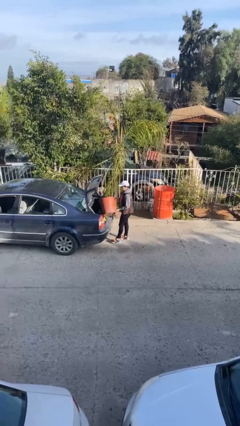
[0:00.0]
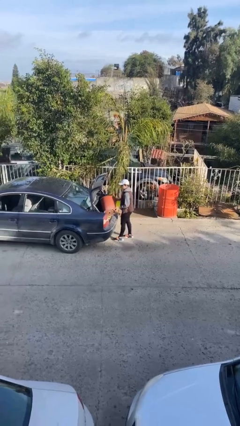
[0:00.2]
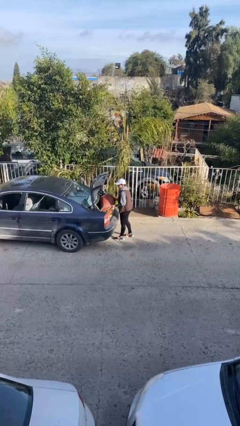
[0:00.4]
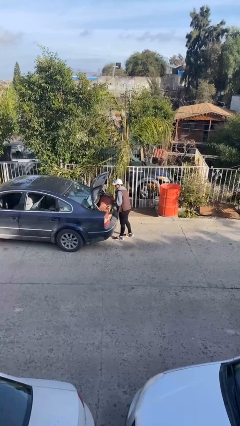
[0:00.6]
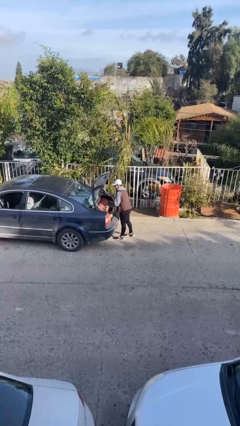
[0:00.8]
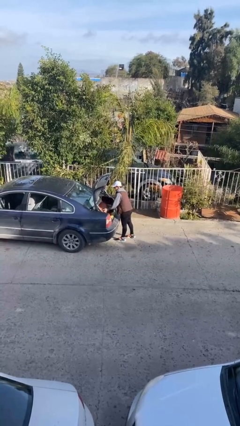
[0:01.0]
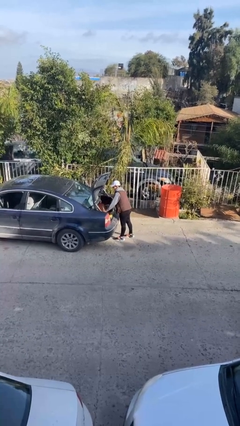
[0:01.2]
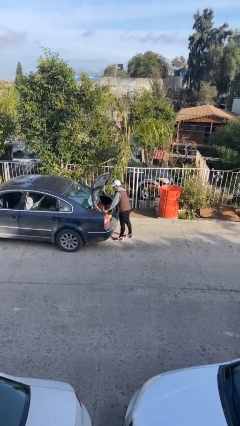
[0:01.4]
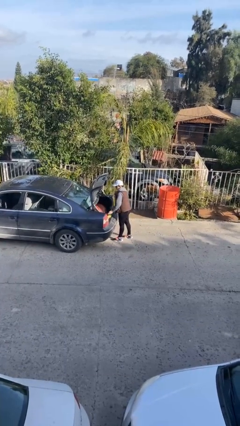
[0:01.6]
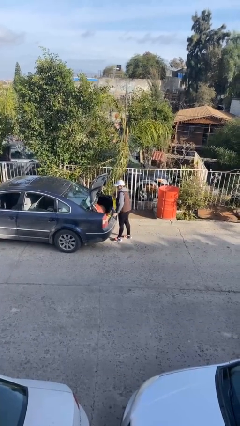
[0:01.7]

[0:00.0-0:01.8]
person loads car

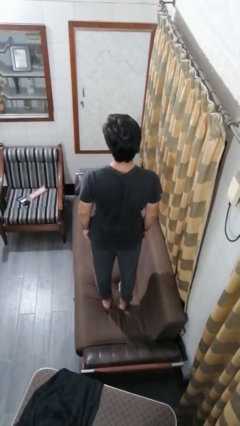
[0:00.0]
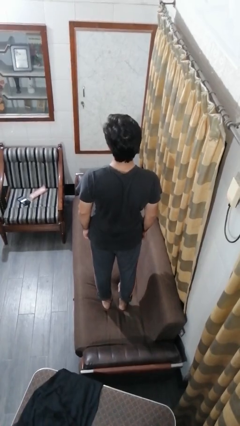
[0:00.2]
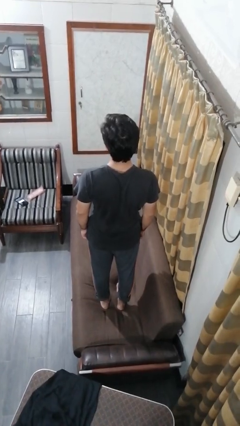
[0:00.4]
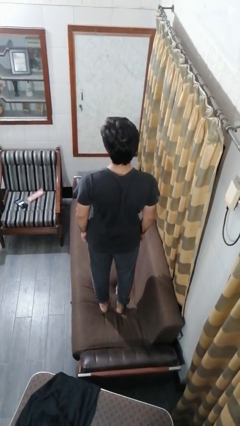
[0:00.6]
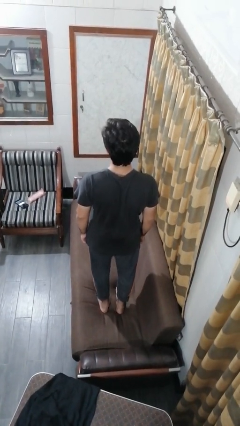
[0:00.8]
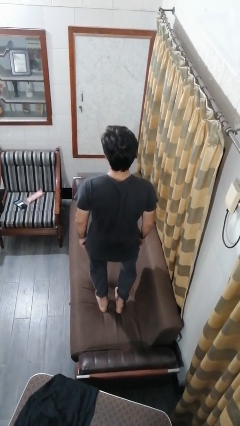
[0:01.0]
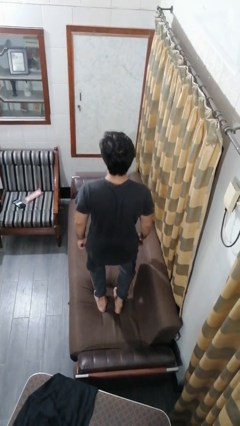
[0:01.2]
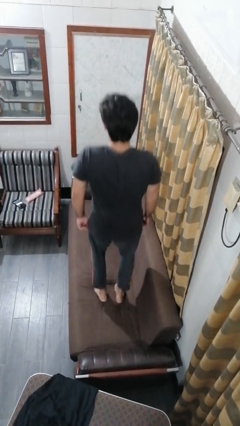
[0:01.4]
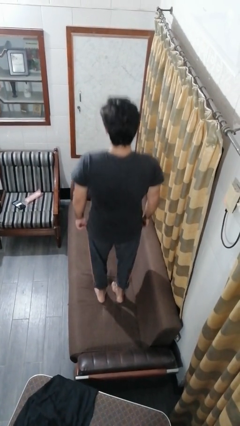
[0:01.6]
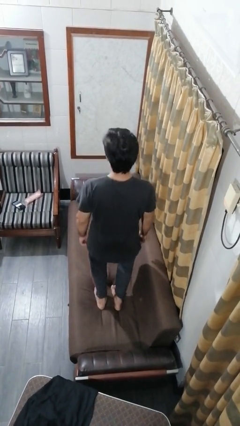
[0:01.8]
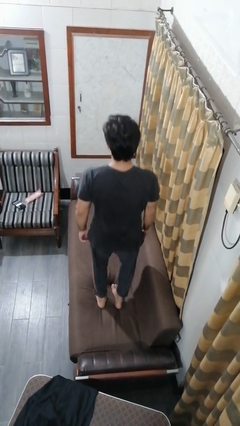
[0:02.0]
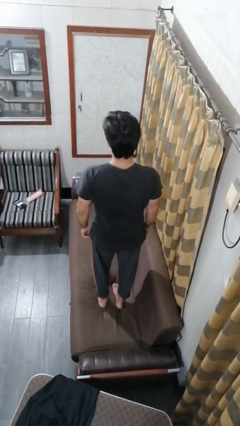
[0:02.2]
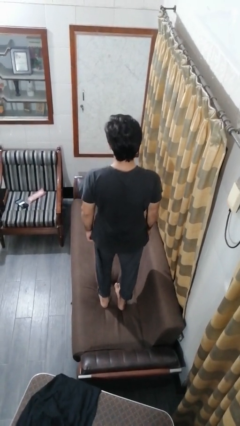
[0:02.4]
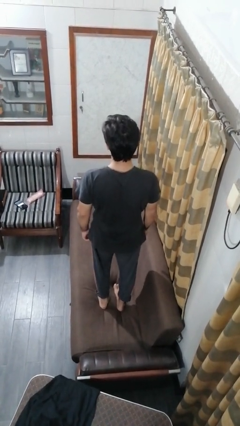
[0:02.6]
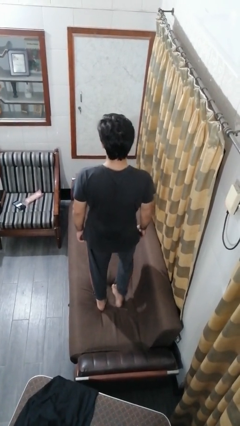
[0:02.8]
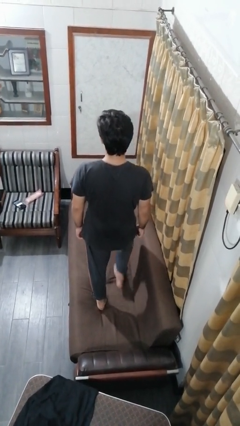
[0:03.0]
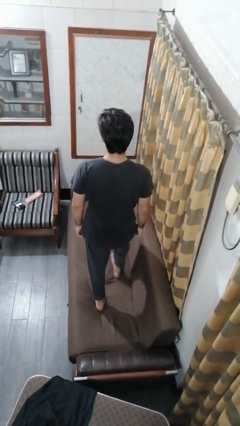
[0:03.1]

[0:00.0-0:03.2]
person jumps on couch

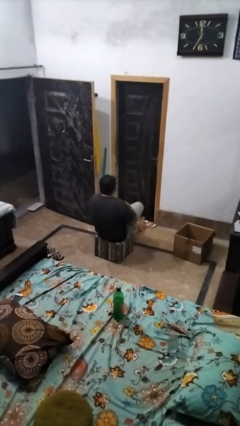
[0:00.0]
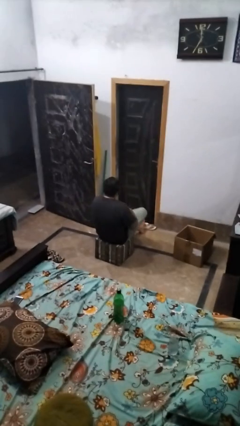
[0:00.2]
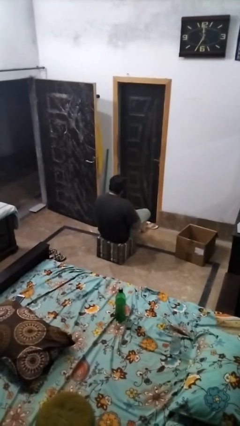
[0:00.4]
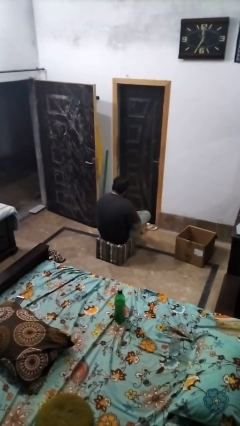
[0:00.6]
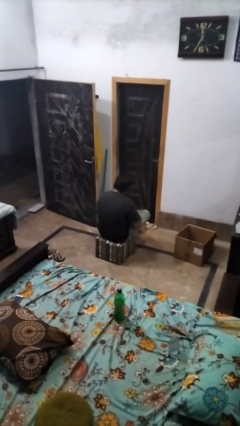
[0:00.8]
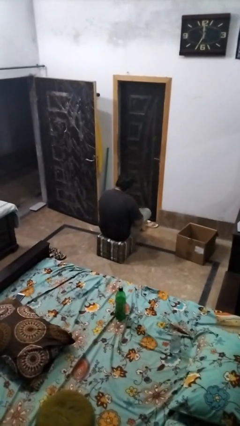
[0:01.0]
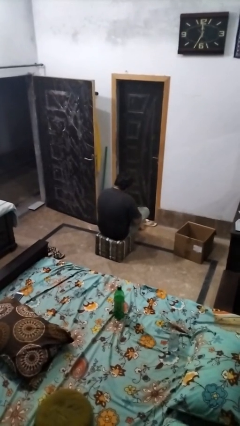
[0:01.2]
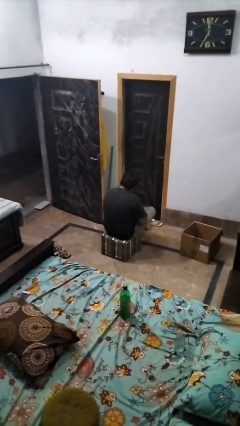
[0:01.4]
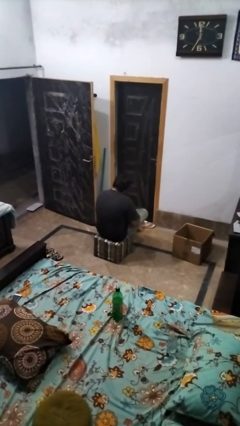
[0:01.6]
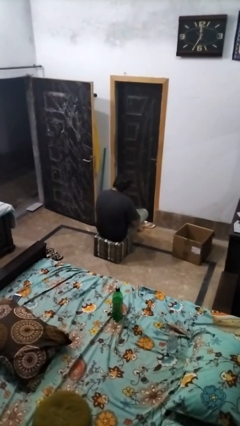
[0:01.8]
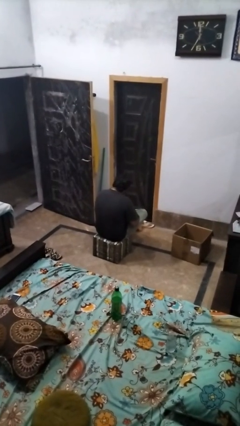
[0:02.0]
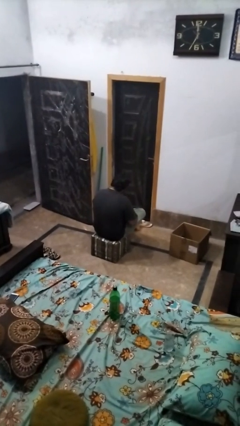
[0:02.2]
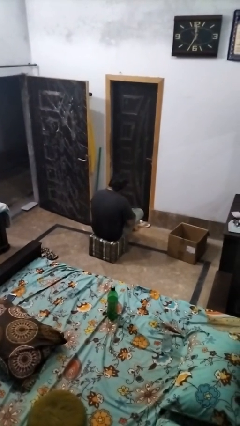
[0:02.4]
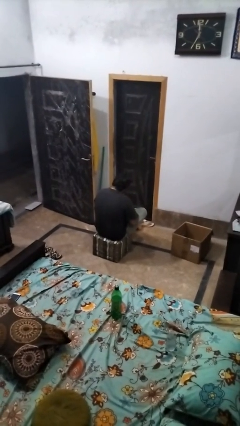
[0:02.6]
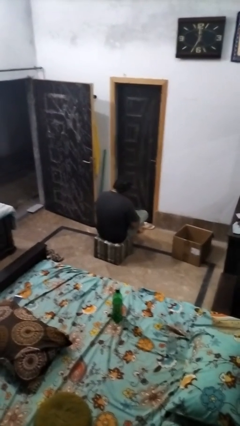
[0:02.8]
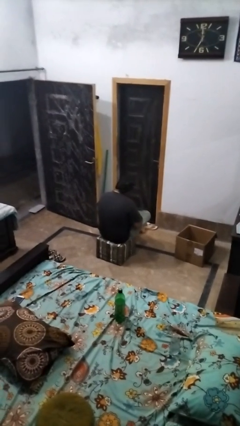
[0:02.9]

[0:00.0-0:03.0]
person rubs foot

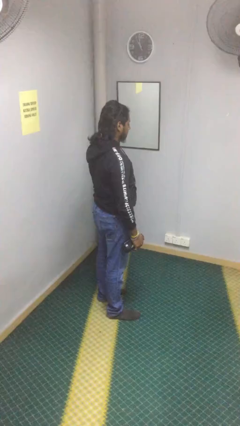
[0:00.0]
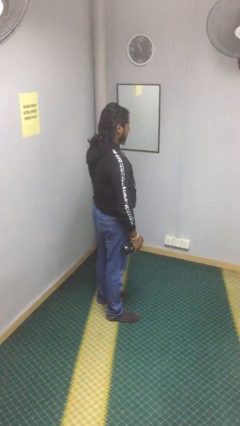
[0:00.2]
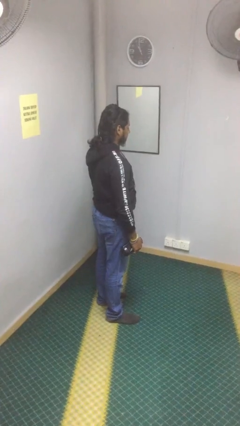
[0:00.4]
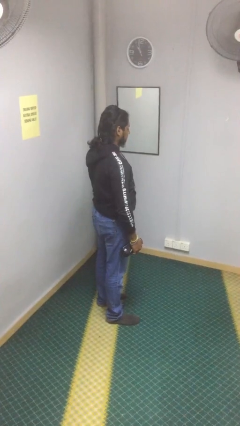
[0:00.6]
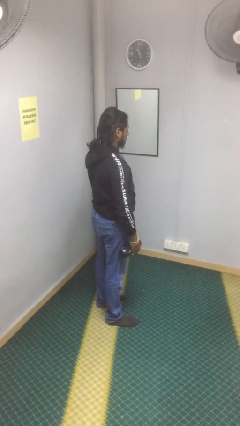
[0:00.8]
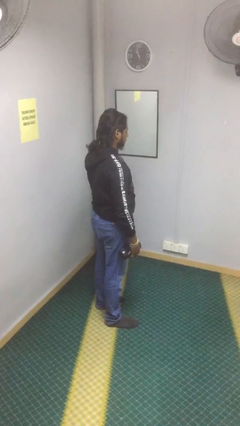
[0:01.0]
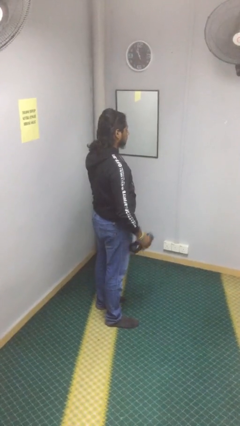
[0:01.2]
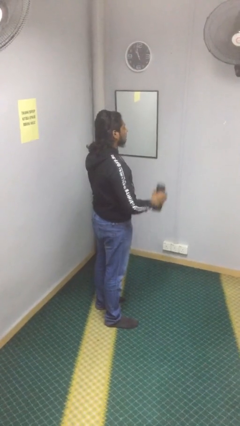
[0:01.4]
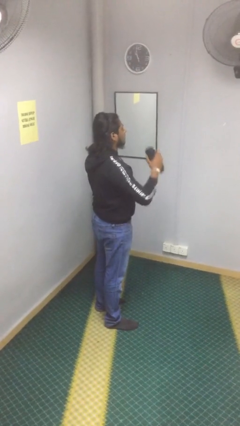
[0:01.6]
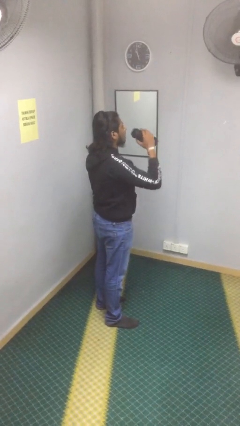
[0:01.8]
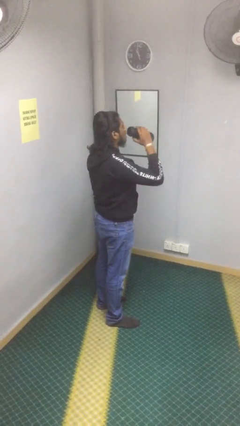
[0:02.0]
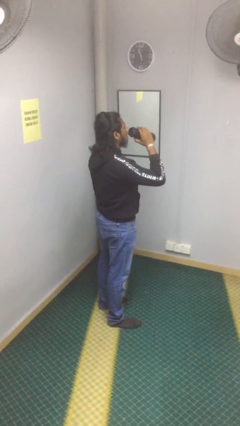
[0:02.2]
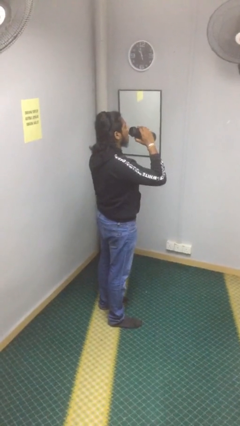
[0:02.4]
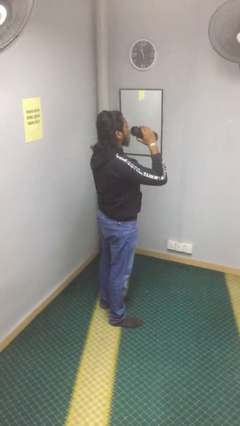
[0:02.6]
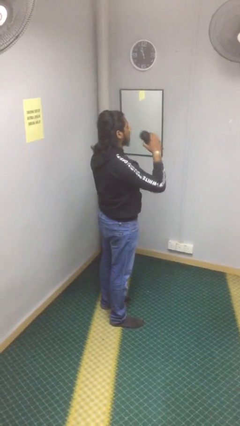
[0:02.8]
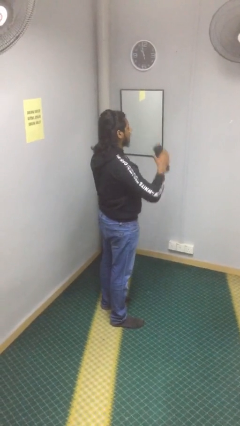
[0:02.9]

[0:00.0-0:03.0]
person drinks from bottle

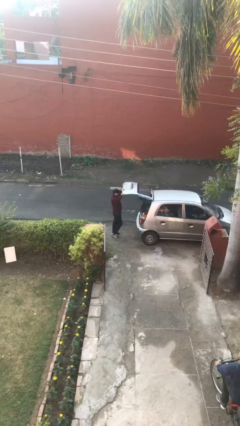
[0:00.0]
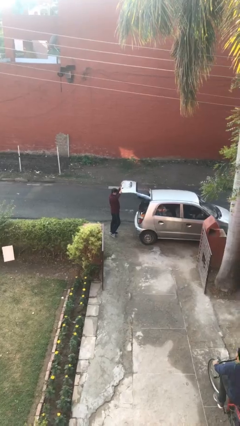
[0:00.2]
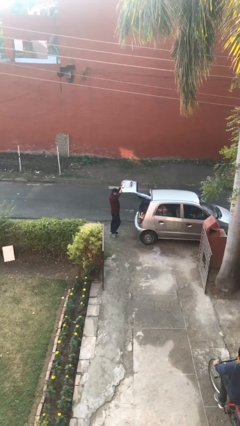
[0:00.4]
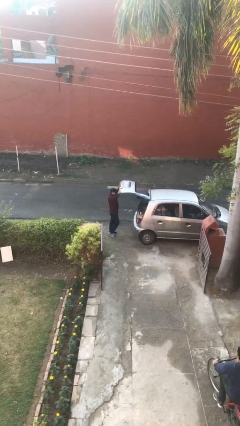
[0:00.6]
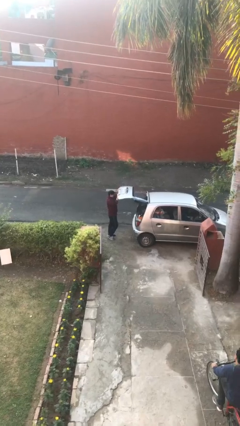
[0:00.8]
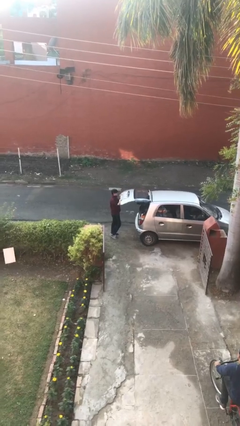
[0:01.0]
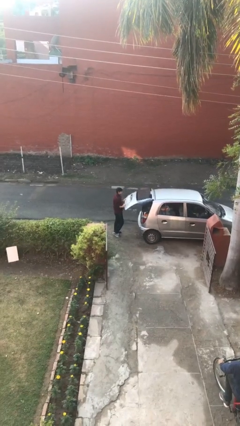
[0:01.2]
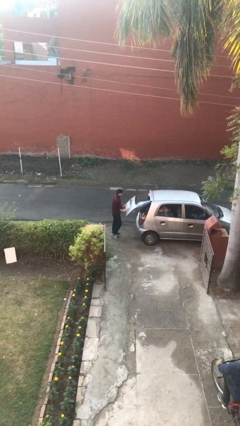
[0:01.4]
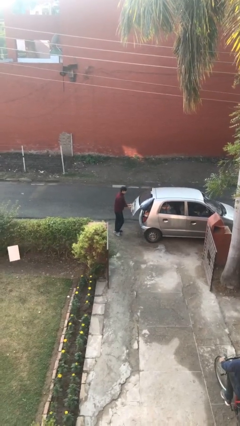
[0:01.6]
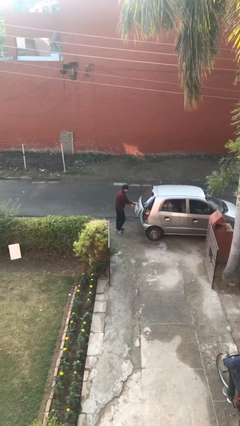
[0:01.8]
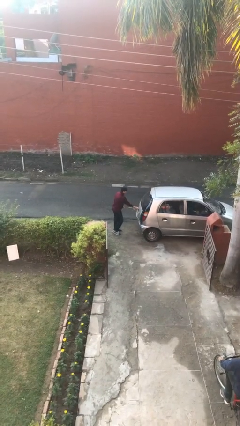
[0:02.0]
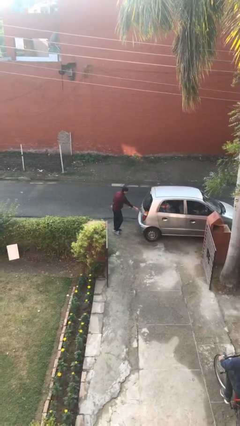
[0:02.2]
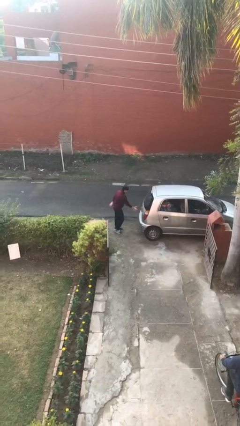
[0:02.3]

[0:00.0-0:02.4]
person closes car trunk

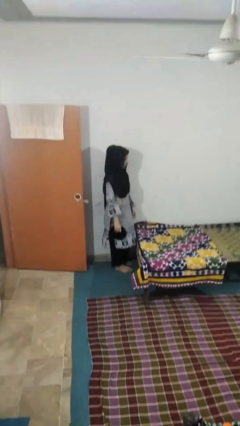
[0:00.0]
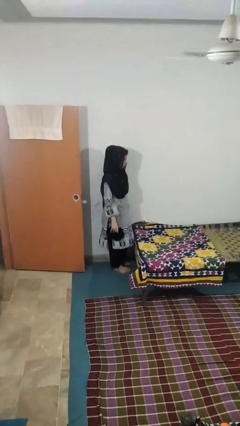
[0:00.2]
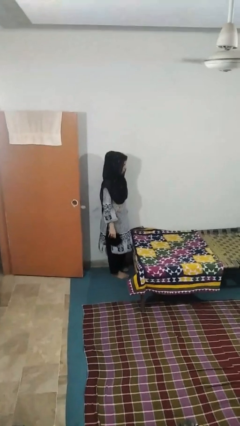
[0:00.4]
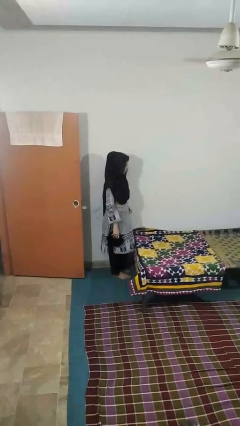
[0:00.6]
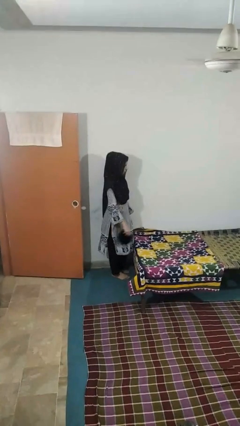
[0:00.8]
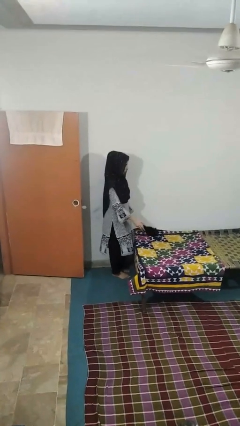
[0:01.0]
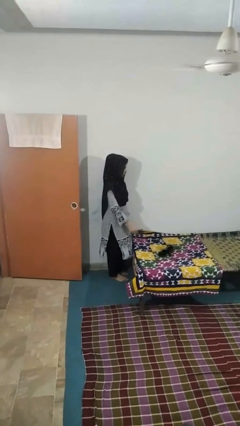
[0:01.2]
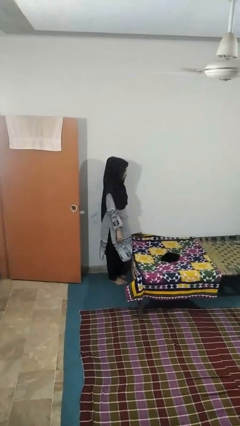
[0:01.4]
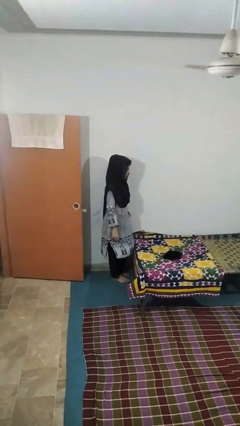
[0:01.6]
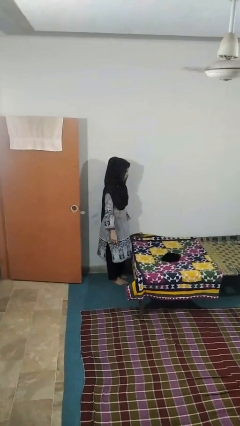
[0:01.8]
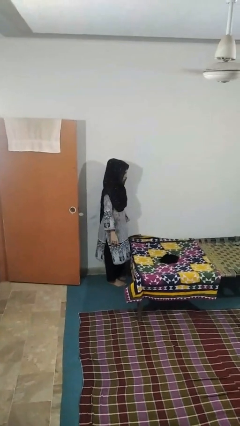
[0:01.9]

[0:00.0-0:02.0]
person throws object on bed

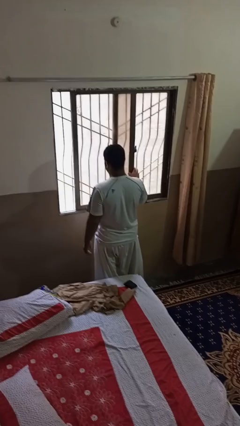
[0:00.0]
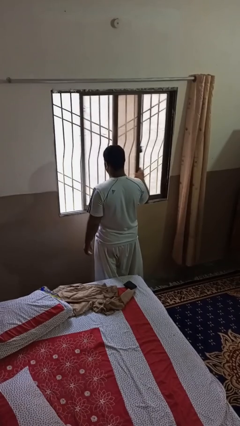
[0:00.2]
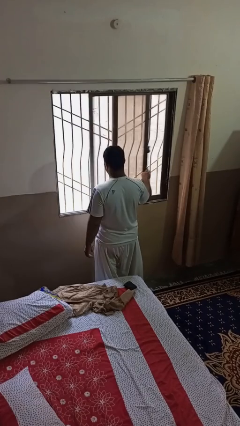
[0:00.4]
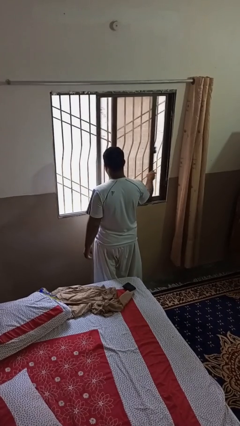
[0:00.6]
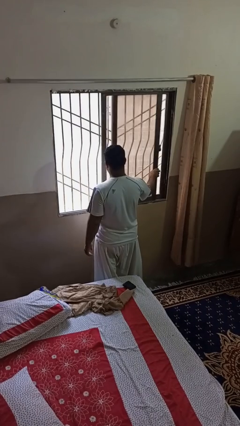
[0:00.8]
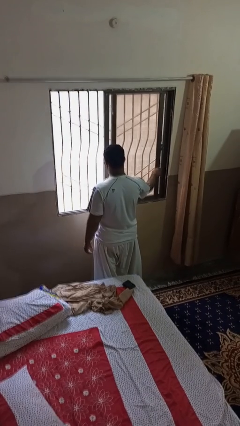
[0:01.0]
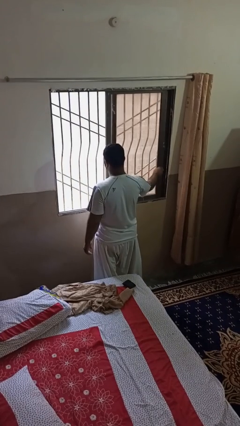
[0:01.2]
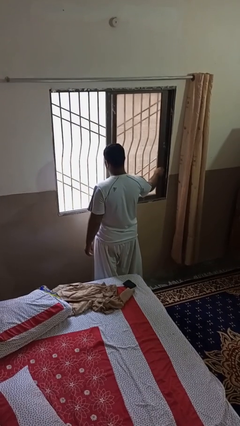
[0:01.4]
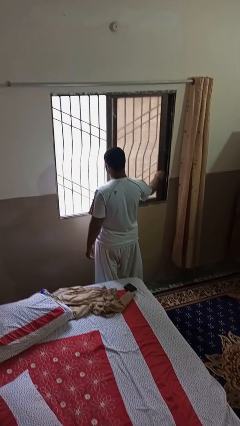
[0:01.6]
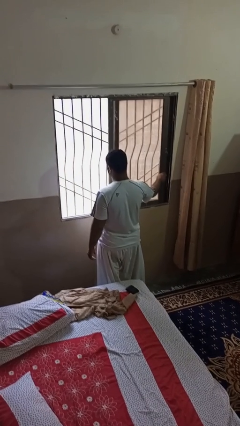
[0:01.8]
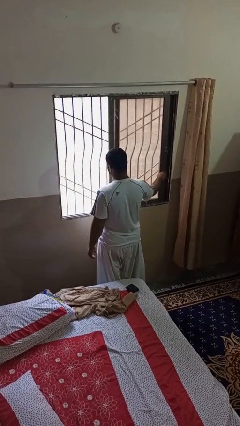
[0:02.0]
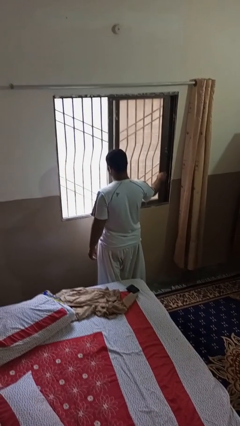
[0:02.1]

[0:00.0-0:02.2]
person opens home window

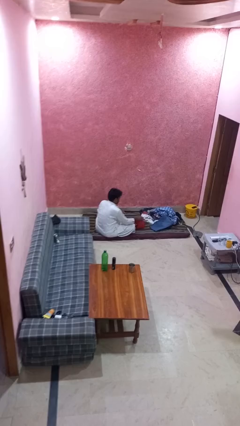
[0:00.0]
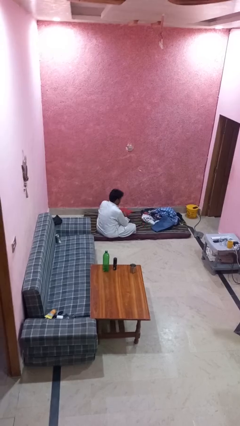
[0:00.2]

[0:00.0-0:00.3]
person folds shirt
